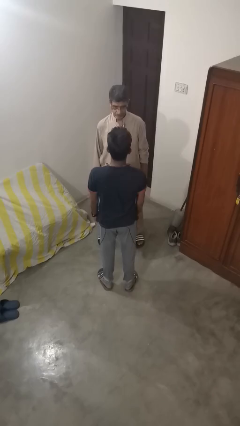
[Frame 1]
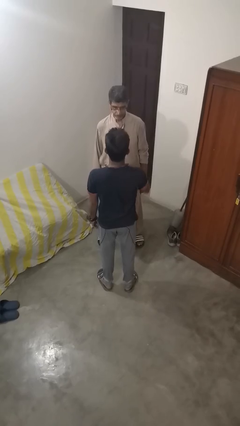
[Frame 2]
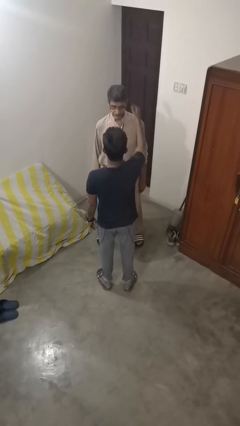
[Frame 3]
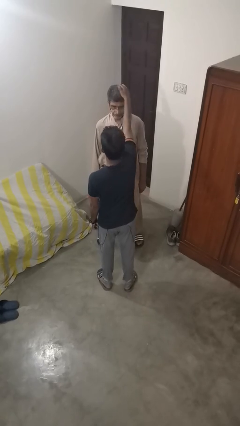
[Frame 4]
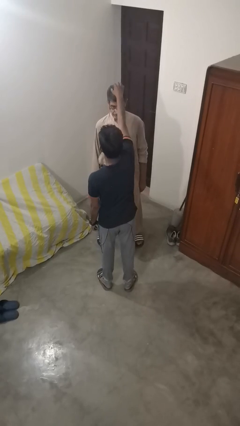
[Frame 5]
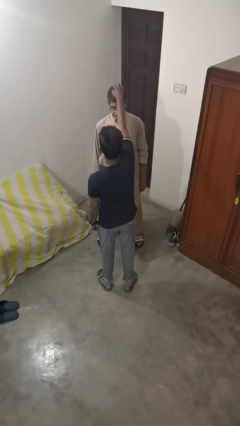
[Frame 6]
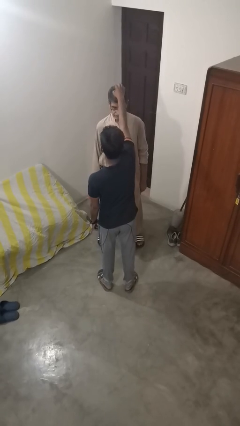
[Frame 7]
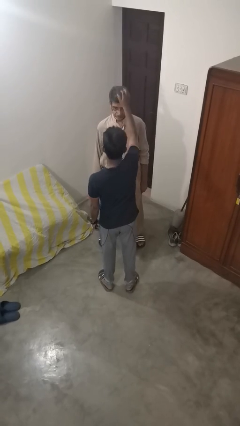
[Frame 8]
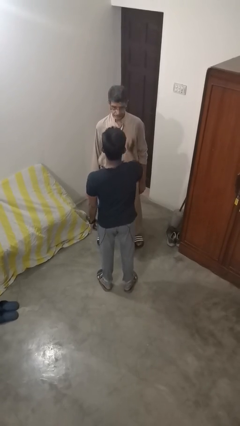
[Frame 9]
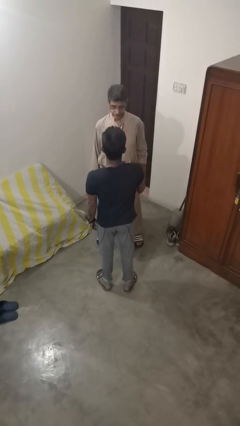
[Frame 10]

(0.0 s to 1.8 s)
person grabs person by hair

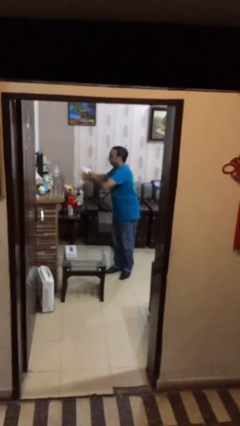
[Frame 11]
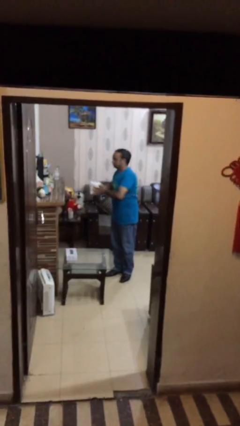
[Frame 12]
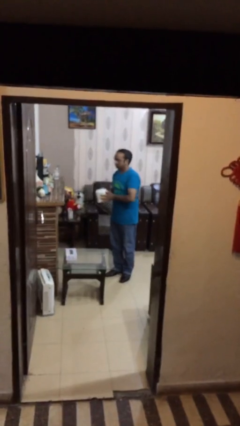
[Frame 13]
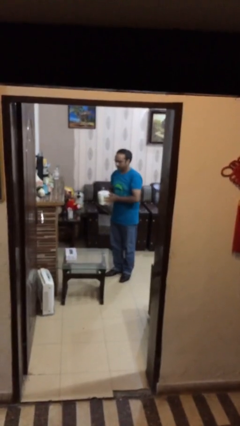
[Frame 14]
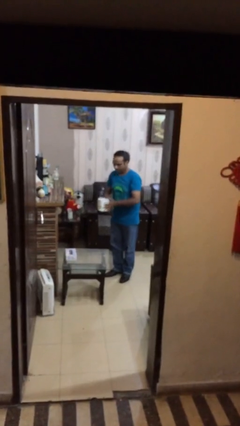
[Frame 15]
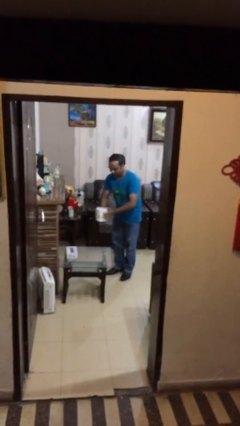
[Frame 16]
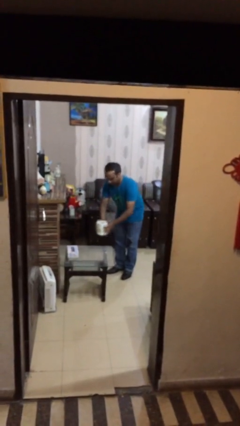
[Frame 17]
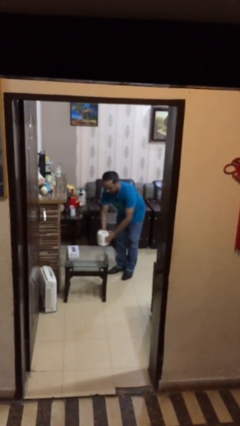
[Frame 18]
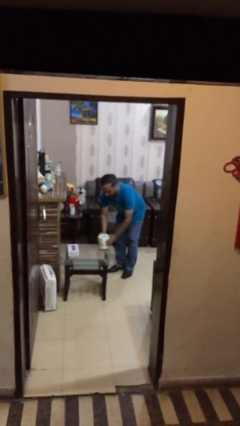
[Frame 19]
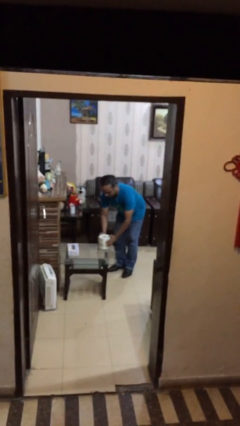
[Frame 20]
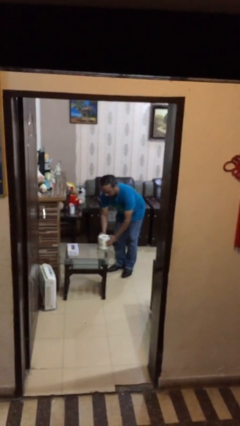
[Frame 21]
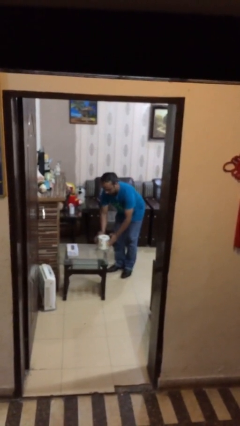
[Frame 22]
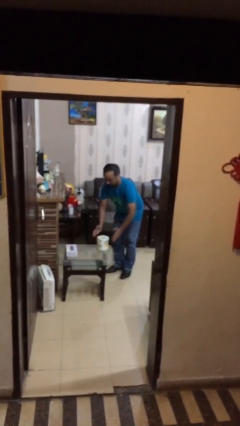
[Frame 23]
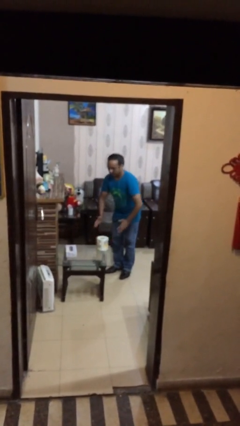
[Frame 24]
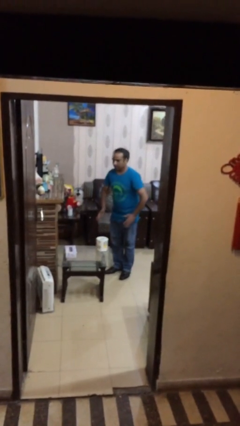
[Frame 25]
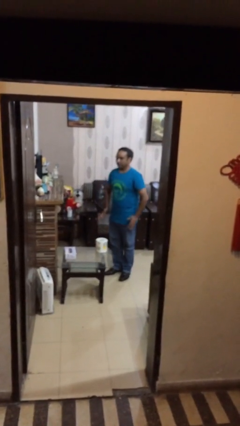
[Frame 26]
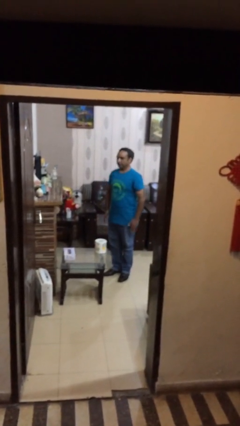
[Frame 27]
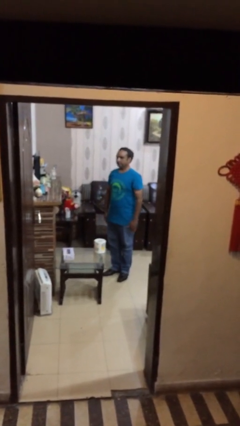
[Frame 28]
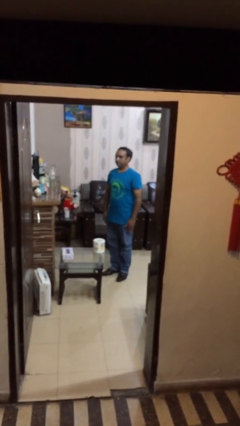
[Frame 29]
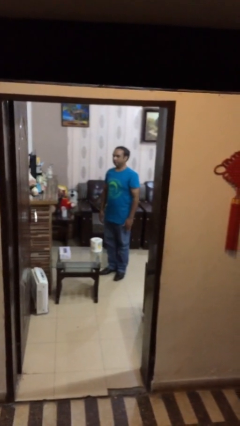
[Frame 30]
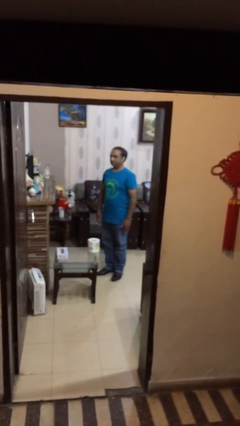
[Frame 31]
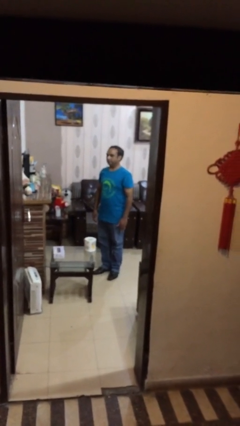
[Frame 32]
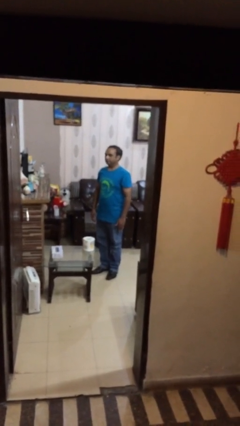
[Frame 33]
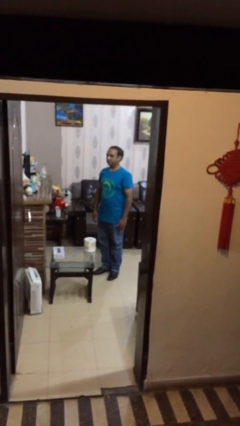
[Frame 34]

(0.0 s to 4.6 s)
person puts down object on table

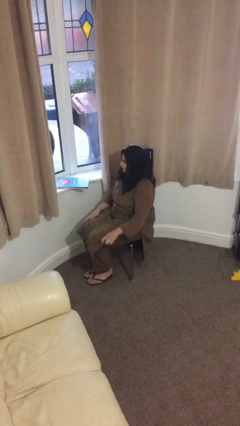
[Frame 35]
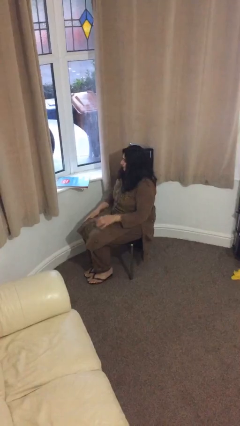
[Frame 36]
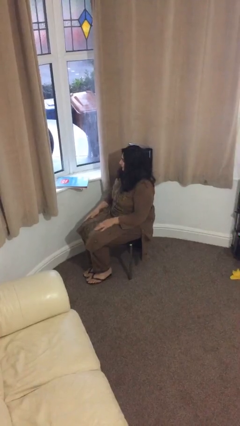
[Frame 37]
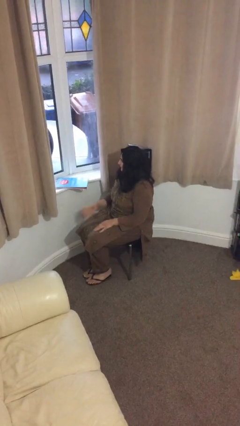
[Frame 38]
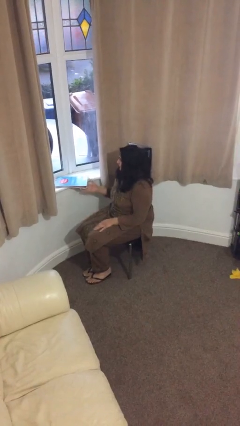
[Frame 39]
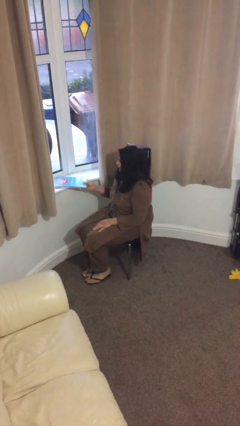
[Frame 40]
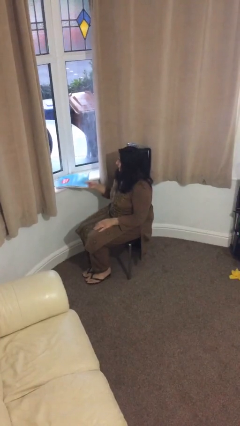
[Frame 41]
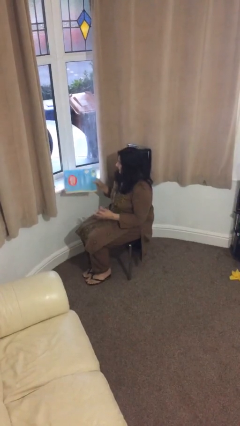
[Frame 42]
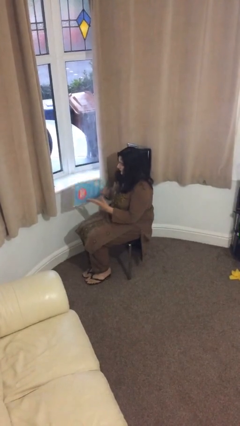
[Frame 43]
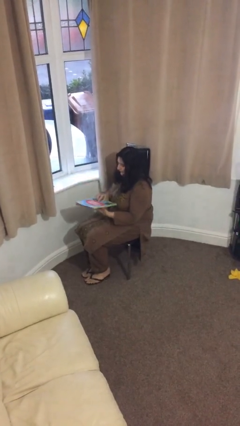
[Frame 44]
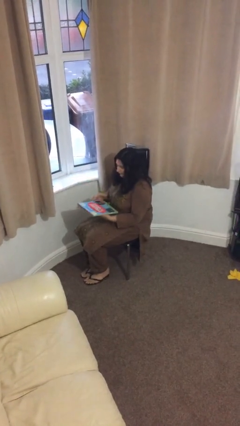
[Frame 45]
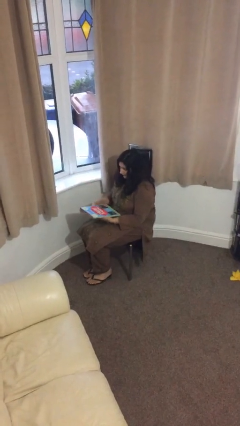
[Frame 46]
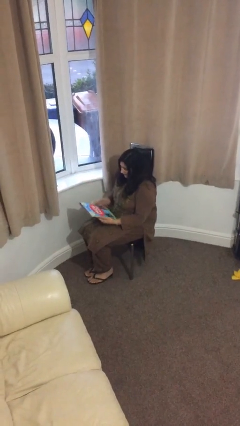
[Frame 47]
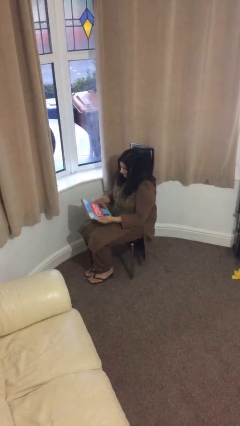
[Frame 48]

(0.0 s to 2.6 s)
person picks up object from table

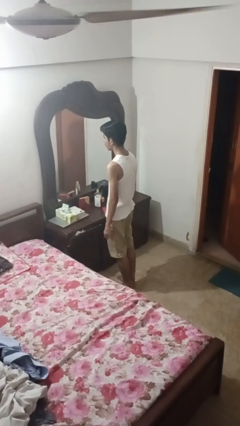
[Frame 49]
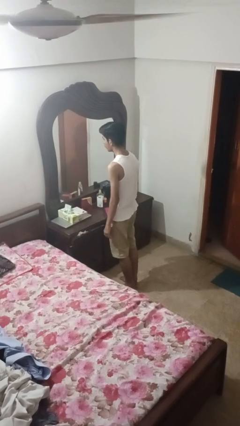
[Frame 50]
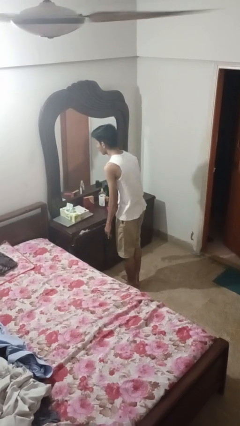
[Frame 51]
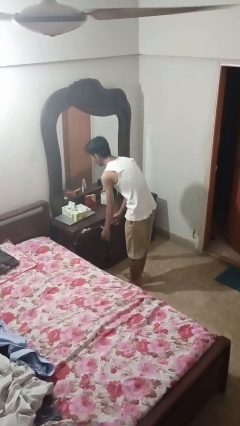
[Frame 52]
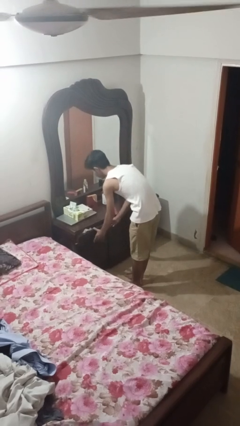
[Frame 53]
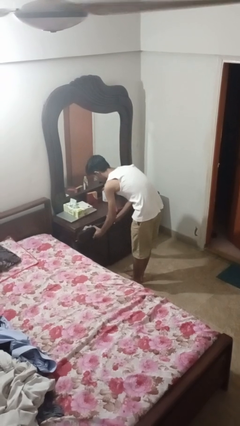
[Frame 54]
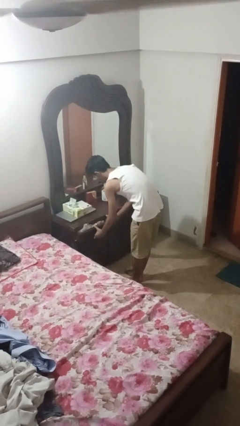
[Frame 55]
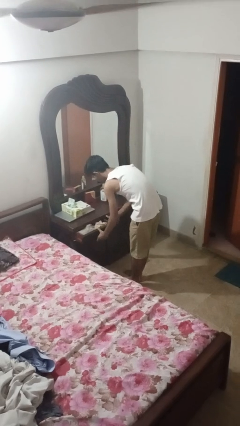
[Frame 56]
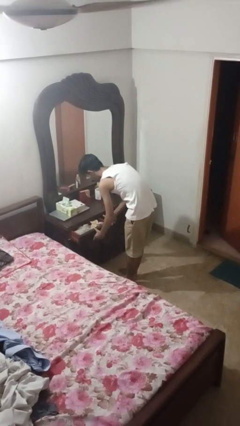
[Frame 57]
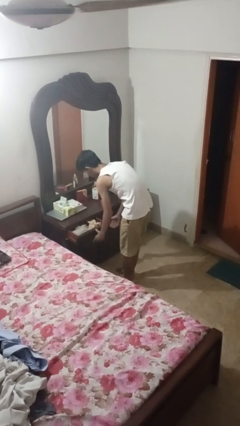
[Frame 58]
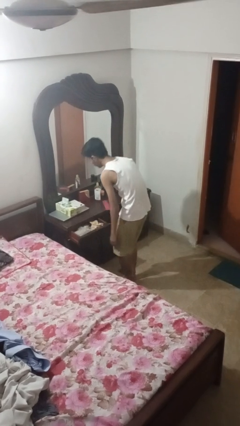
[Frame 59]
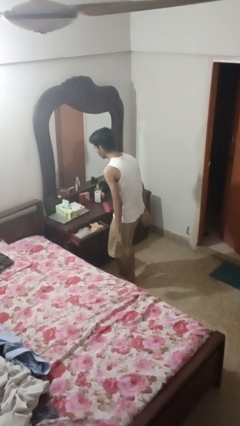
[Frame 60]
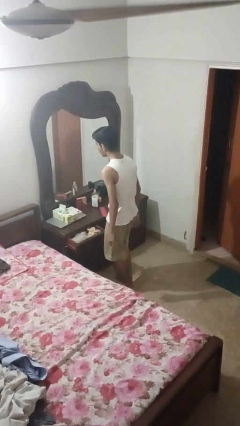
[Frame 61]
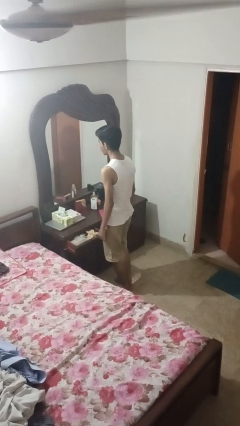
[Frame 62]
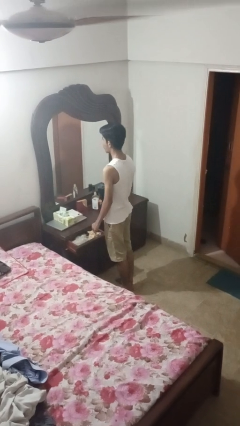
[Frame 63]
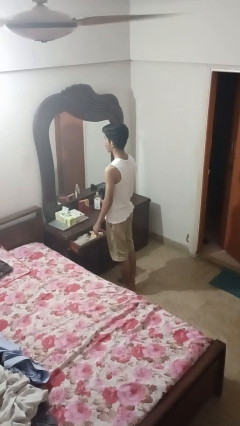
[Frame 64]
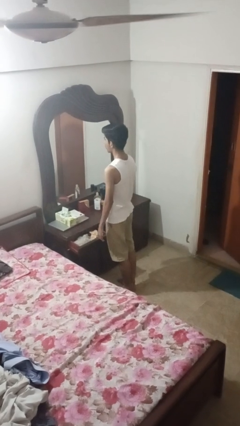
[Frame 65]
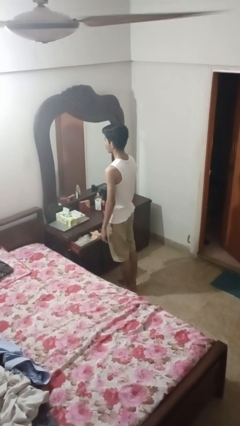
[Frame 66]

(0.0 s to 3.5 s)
person opens dresser drawer

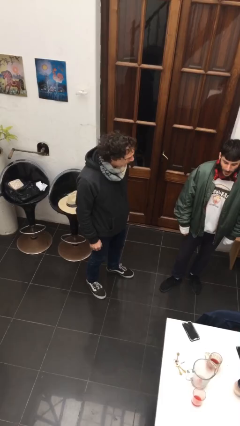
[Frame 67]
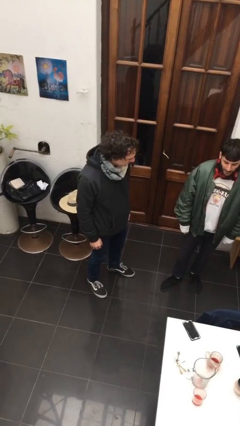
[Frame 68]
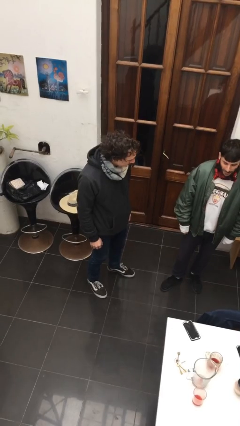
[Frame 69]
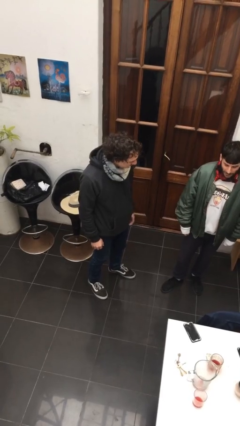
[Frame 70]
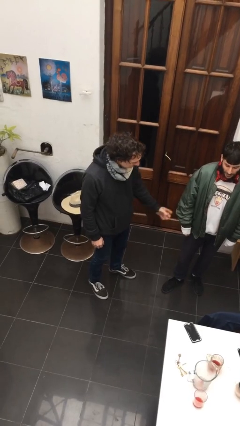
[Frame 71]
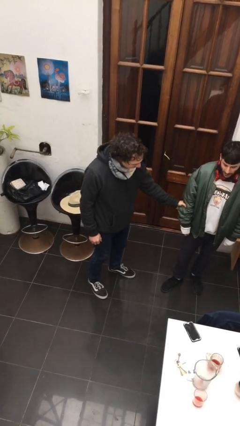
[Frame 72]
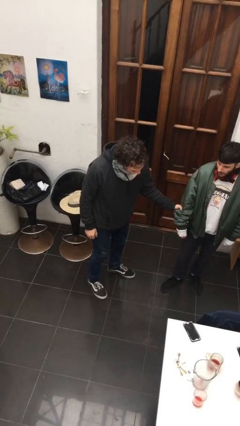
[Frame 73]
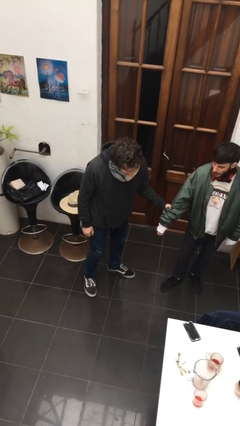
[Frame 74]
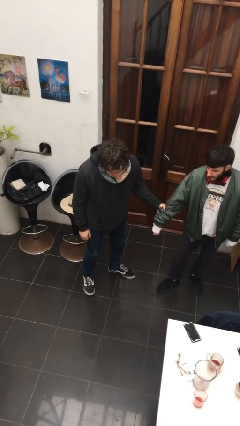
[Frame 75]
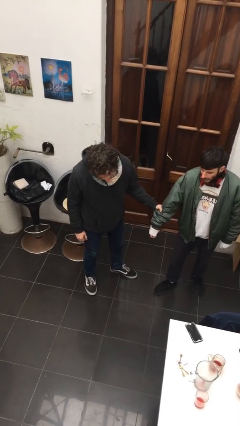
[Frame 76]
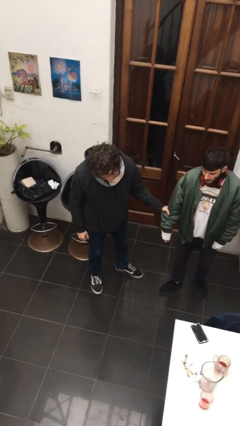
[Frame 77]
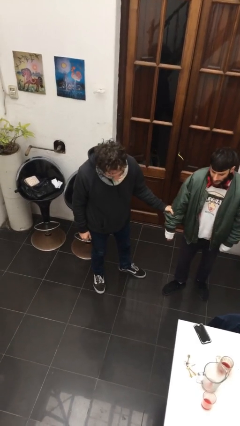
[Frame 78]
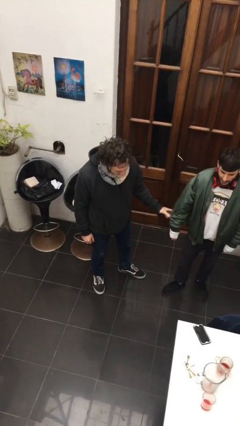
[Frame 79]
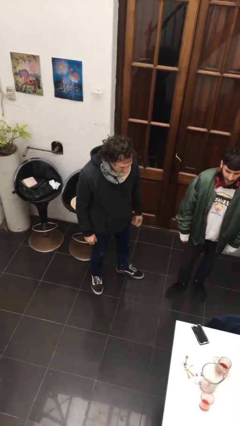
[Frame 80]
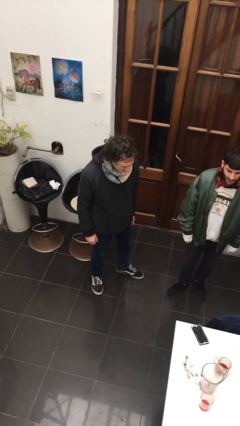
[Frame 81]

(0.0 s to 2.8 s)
person grabs person by forearm

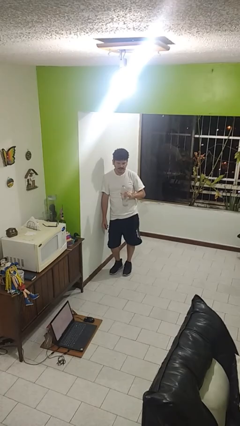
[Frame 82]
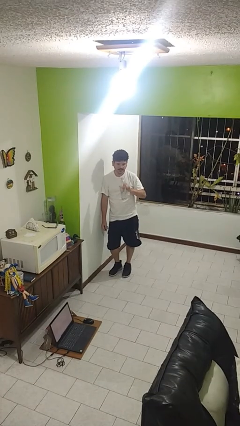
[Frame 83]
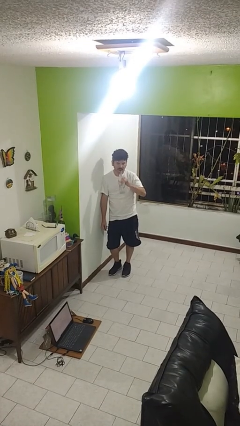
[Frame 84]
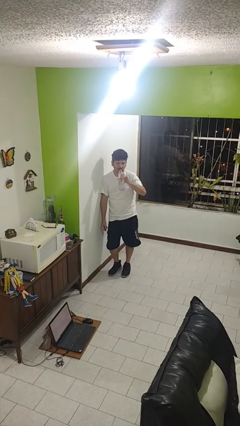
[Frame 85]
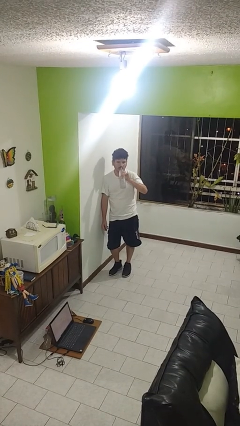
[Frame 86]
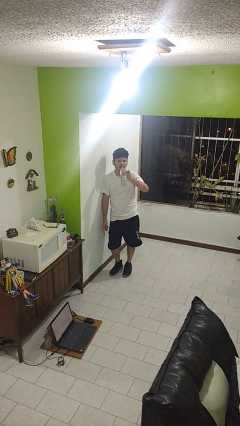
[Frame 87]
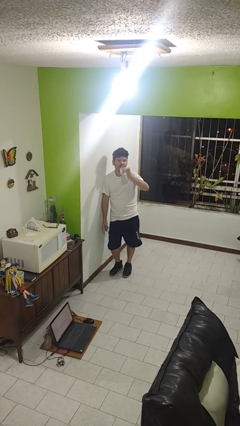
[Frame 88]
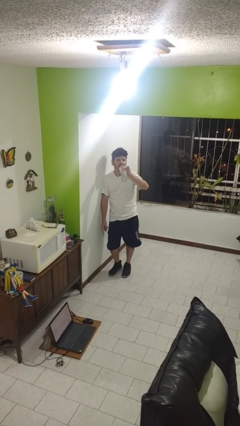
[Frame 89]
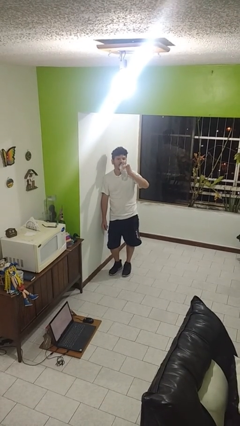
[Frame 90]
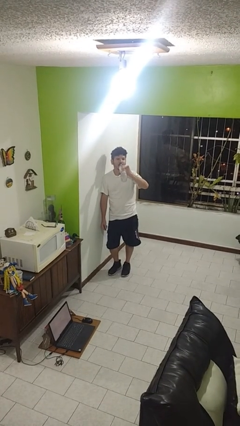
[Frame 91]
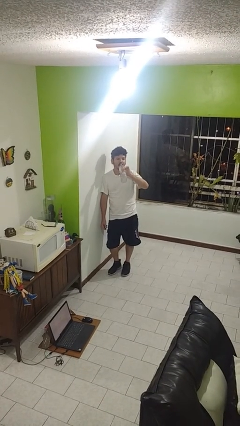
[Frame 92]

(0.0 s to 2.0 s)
person drinks from bottle
